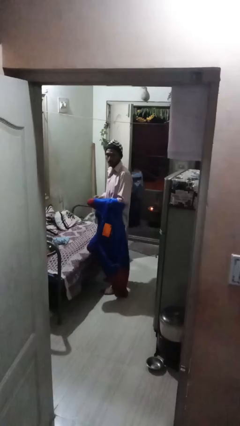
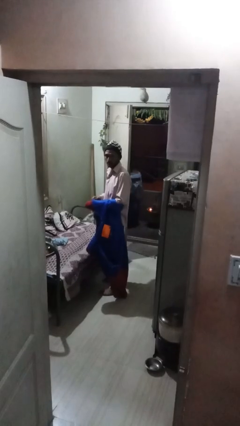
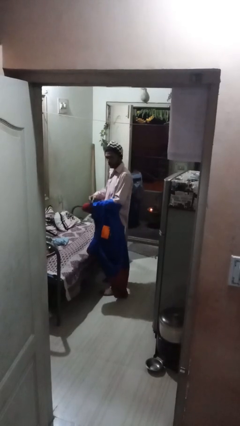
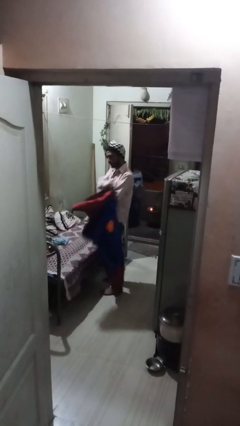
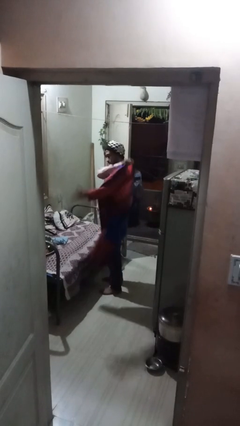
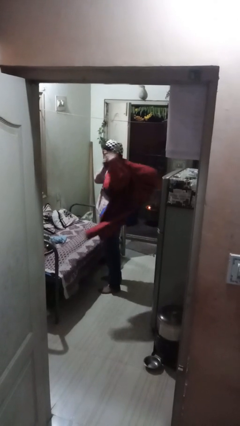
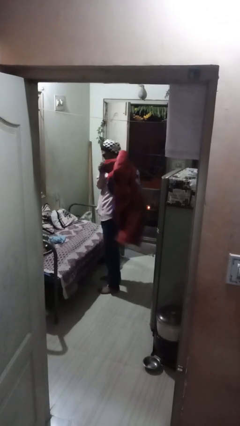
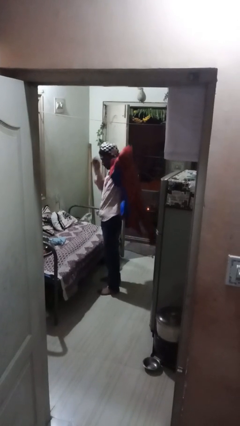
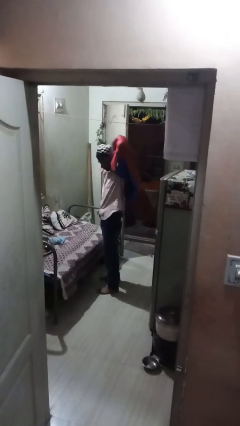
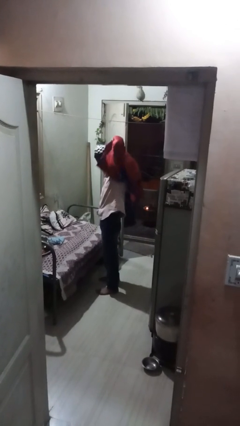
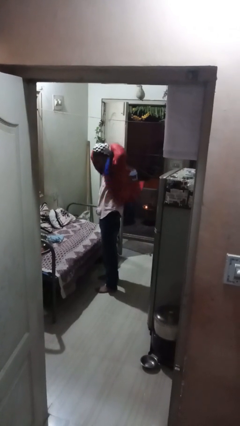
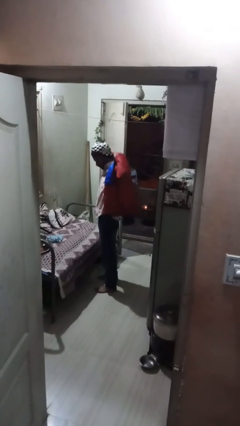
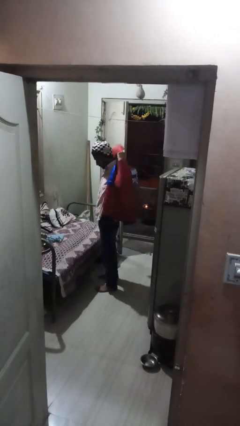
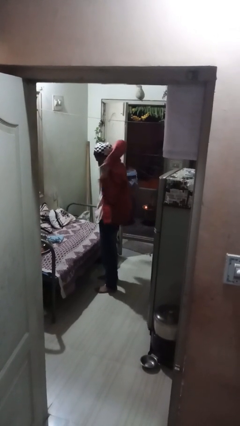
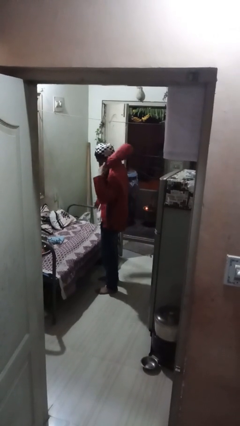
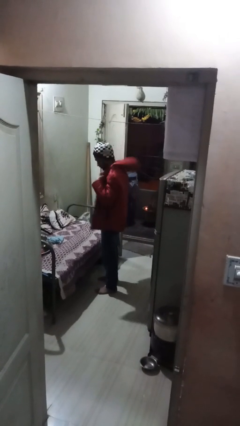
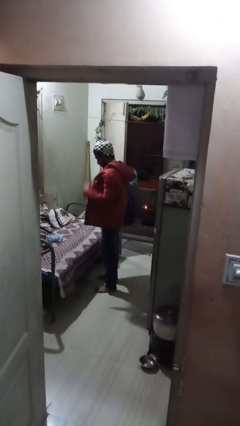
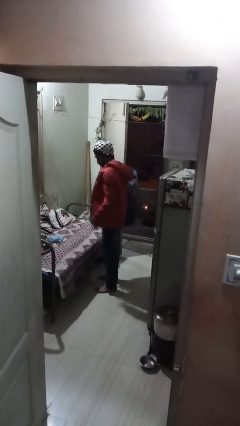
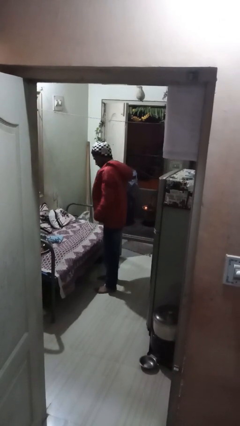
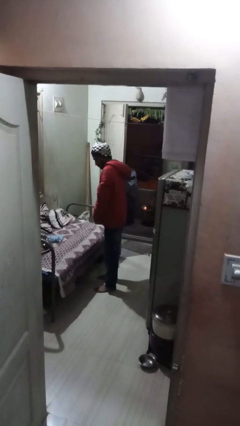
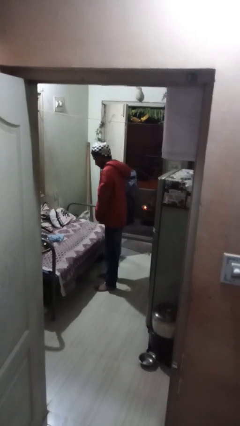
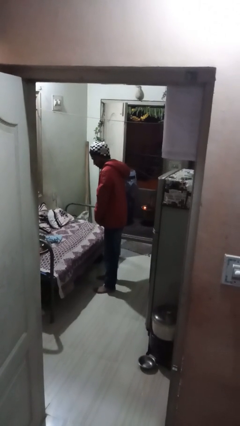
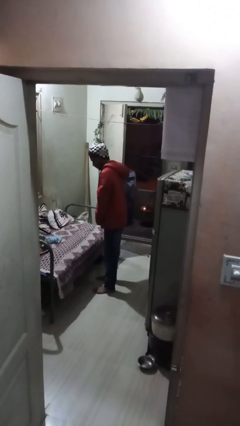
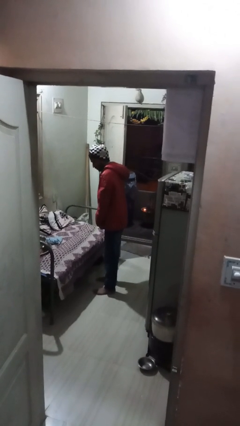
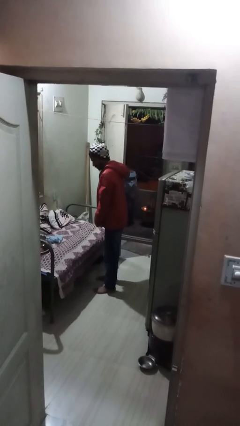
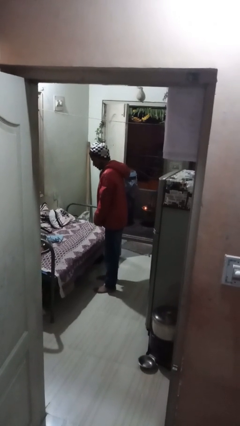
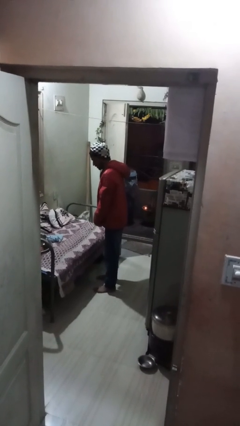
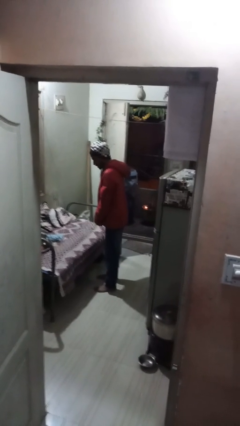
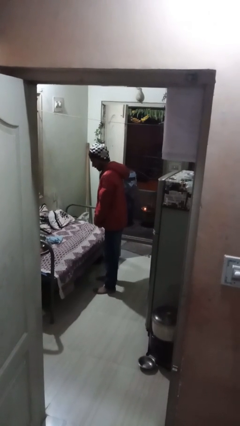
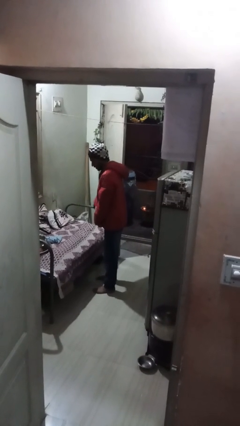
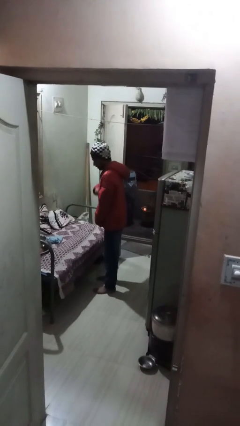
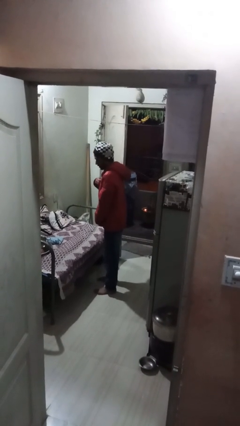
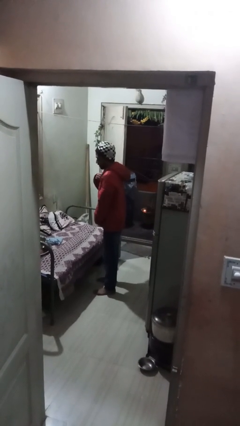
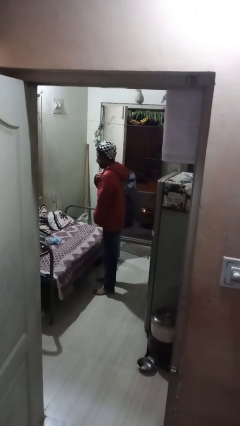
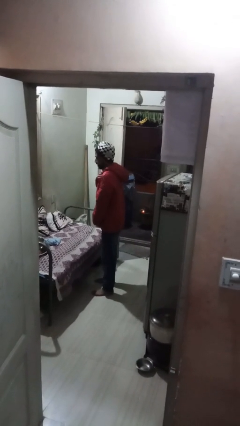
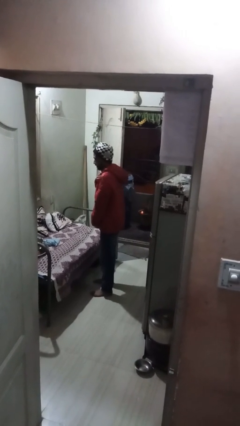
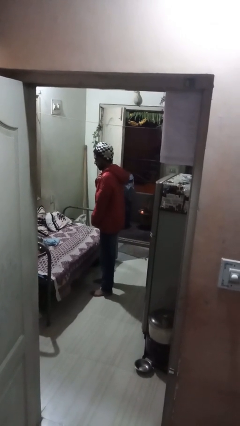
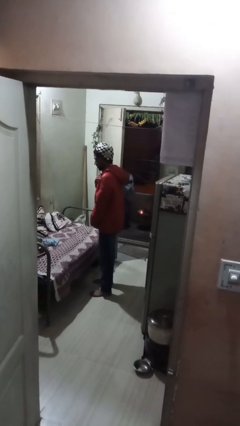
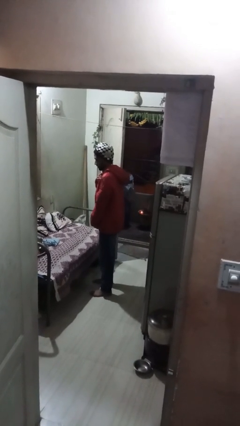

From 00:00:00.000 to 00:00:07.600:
person puts on jacket

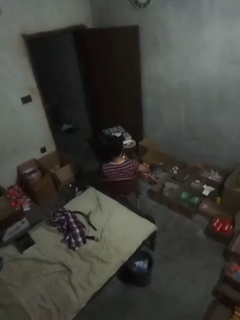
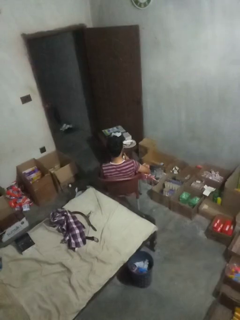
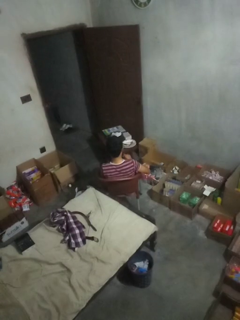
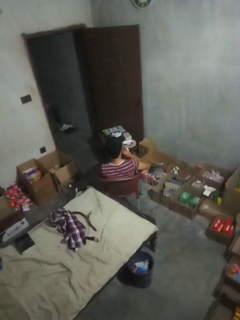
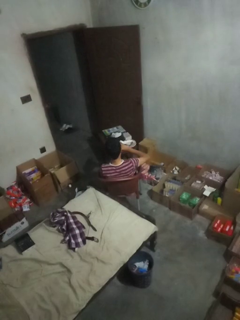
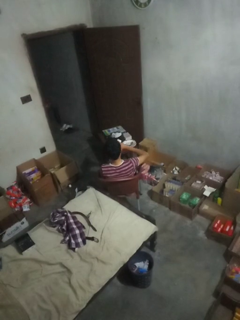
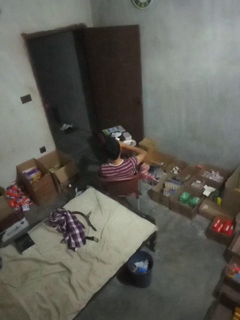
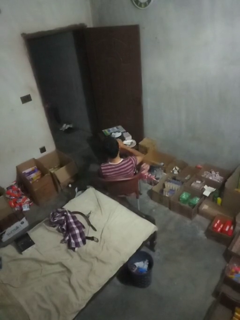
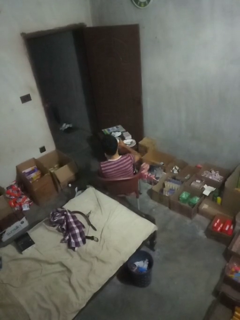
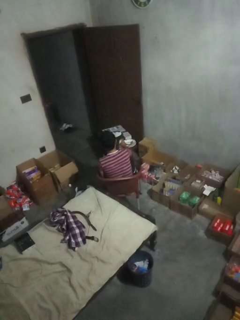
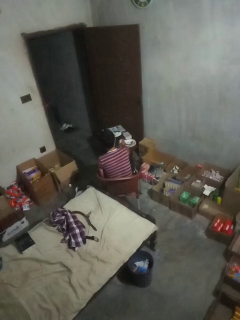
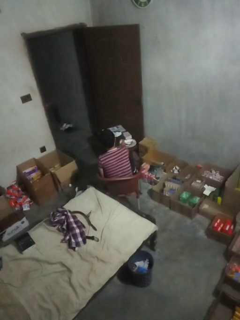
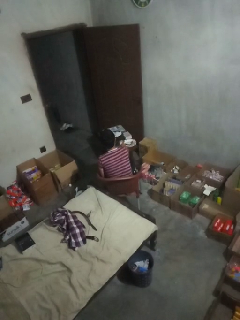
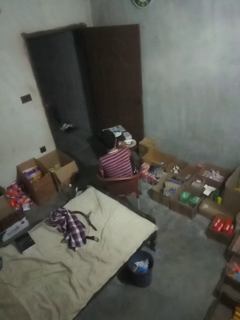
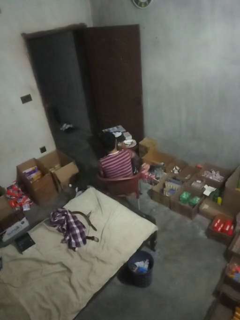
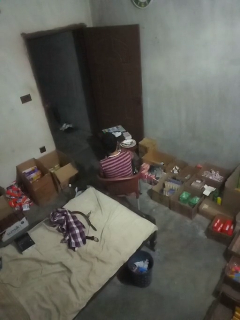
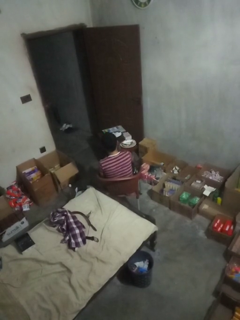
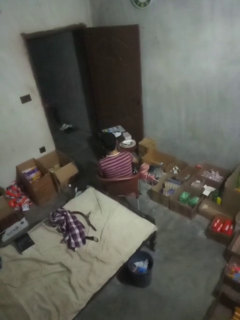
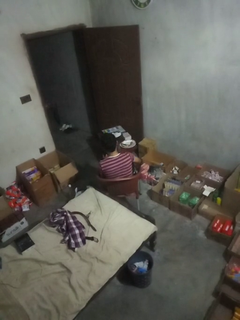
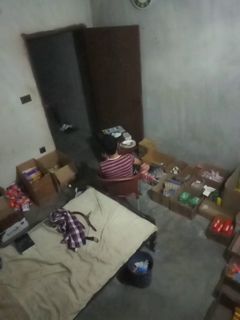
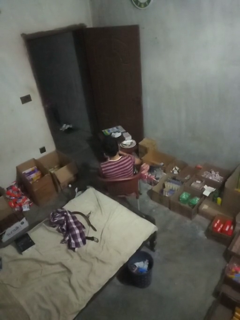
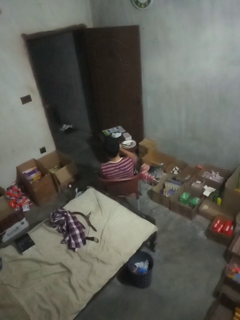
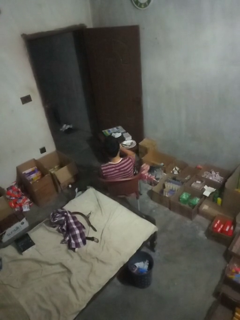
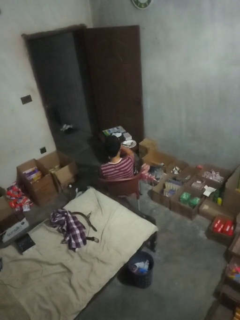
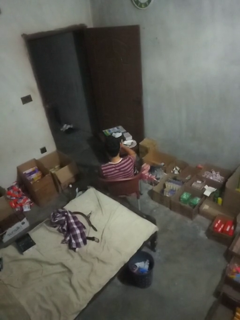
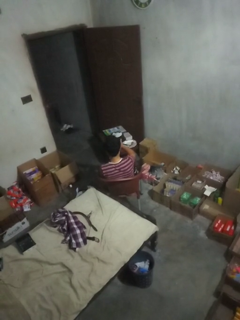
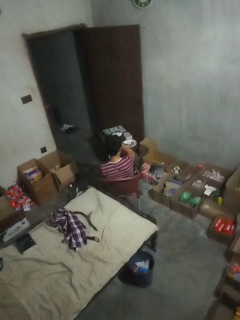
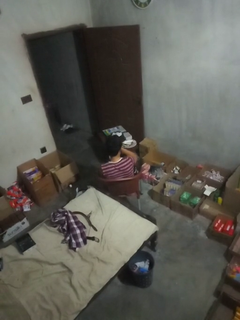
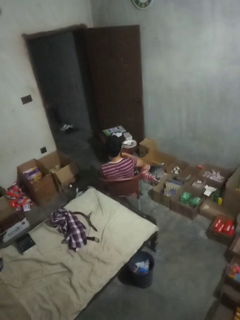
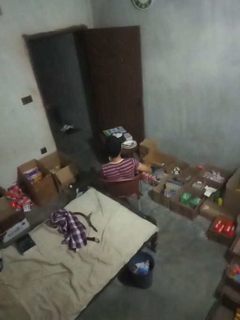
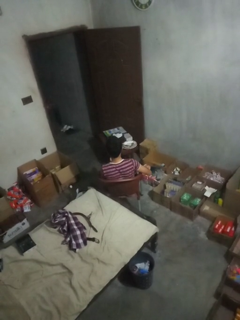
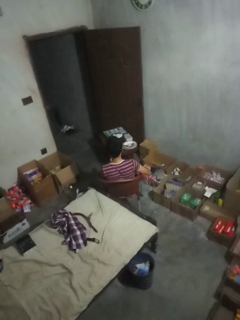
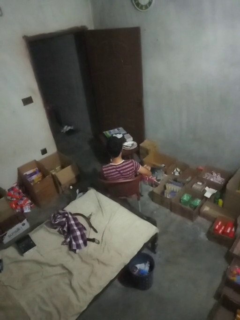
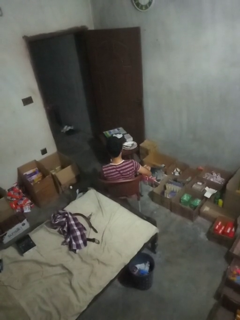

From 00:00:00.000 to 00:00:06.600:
person applies facial moisturizer

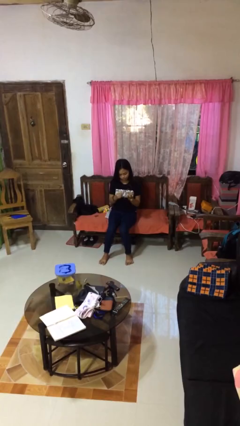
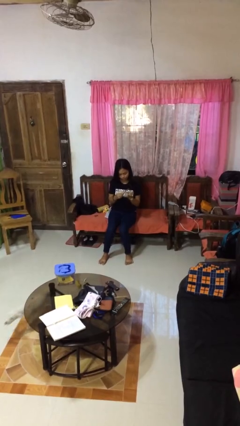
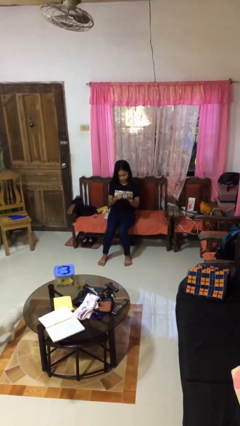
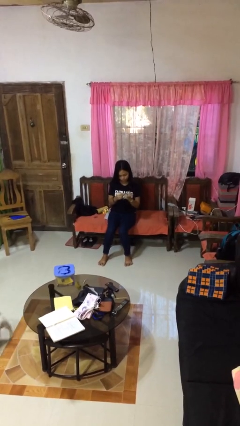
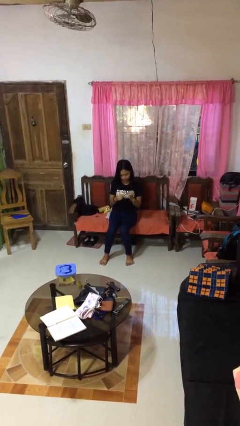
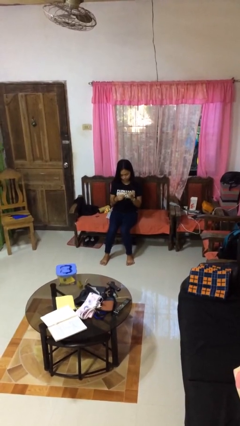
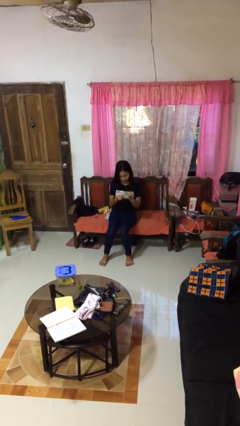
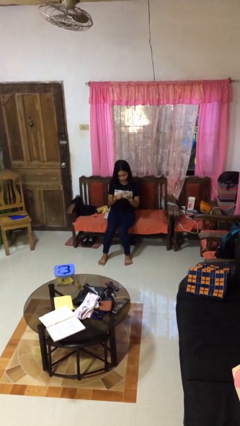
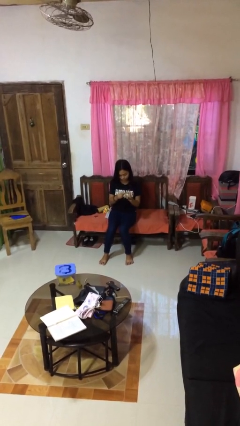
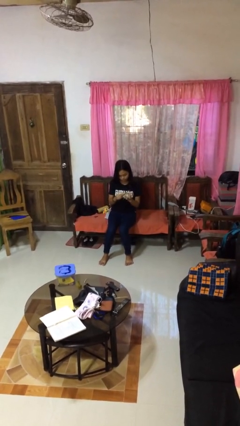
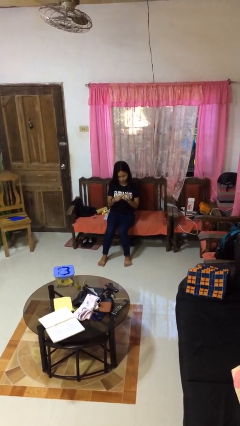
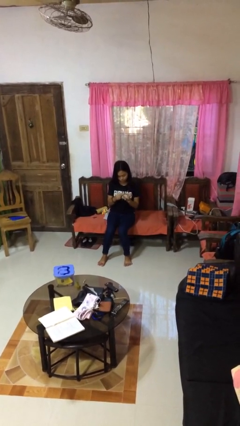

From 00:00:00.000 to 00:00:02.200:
person files fingernails

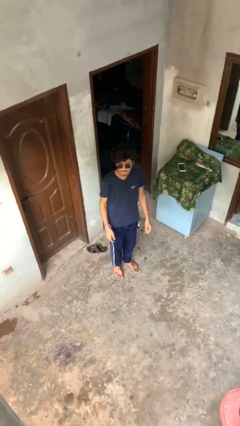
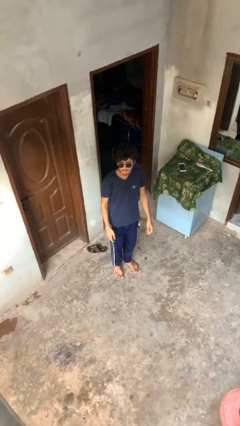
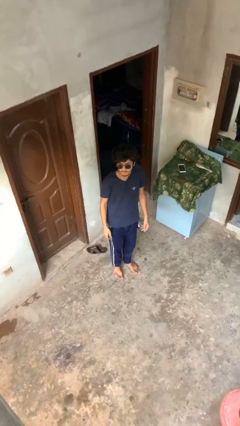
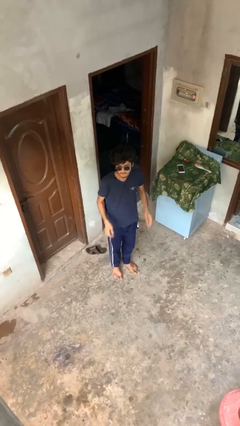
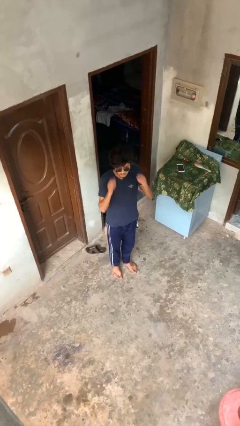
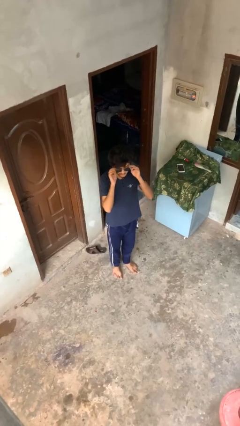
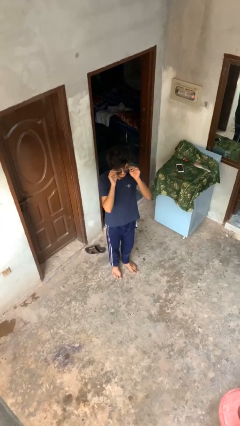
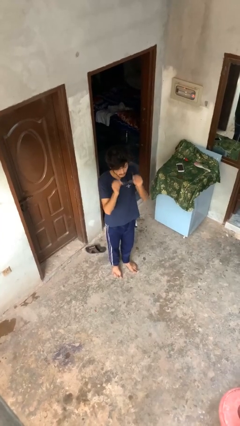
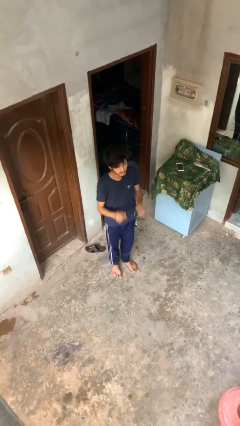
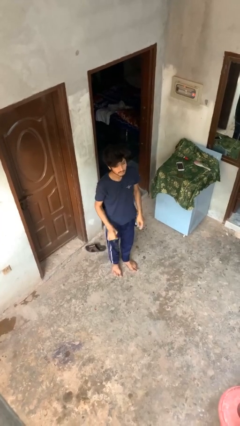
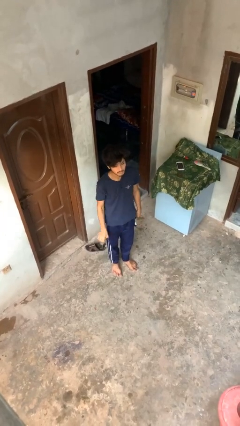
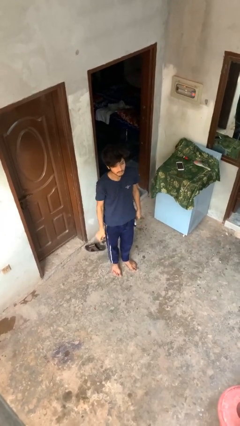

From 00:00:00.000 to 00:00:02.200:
person takes off sunglasses

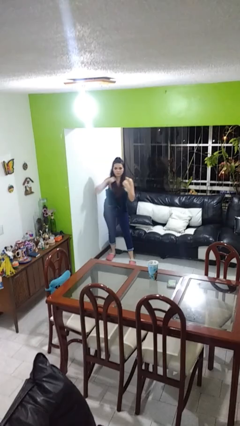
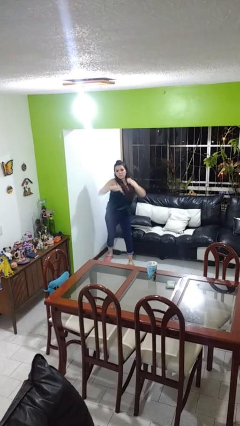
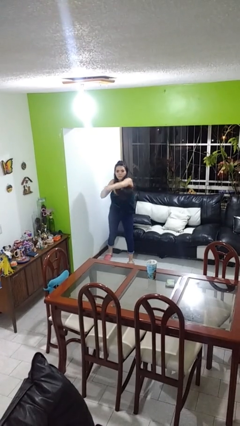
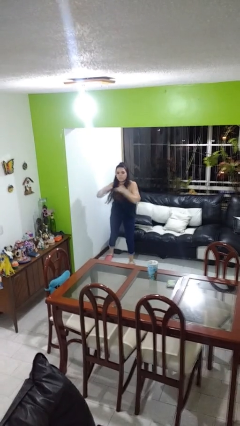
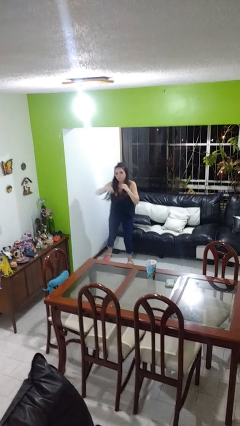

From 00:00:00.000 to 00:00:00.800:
person punches
